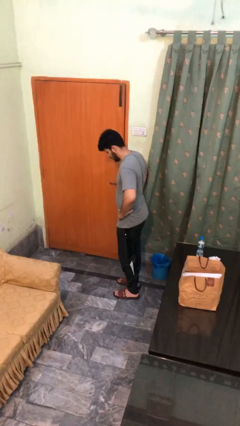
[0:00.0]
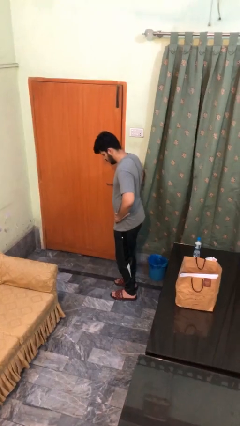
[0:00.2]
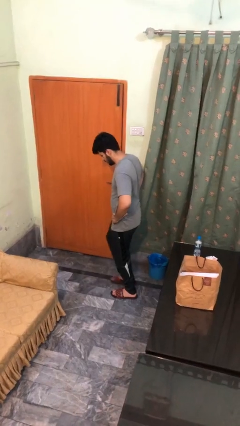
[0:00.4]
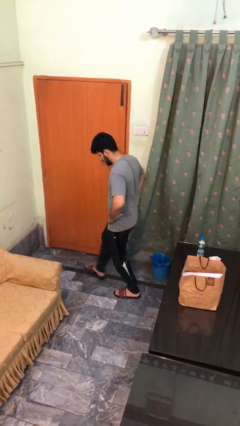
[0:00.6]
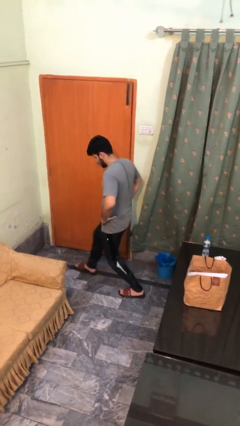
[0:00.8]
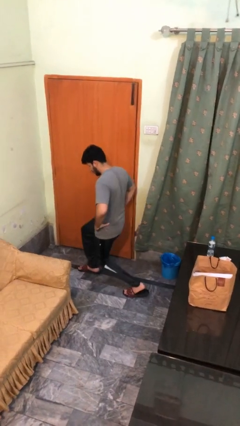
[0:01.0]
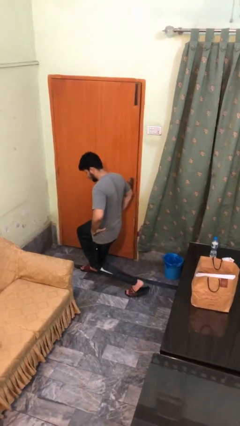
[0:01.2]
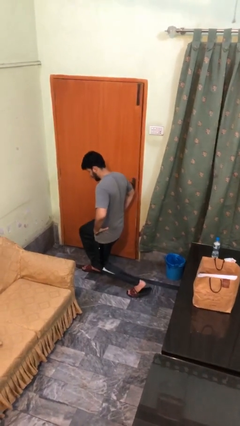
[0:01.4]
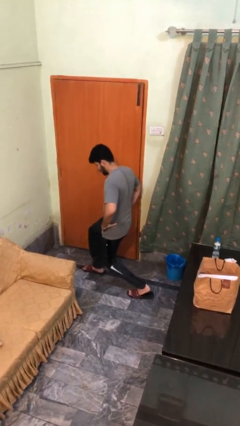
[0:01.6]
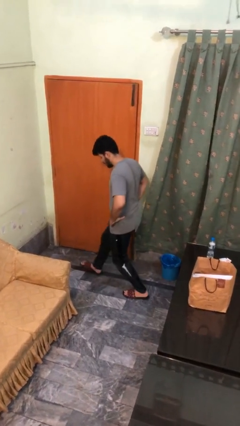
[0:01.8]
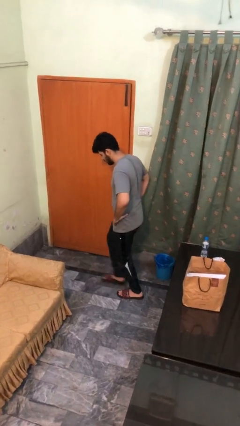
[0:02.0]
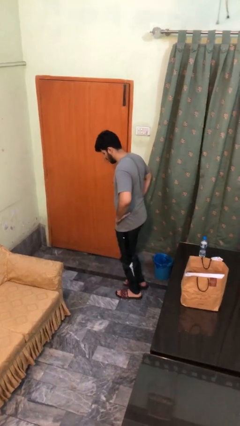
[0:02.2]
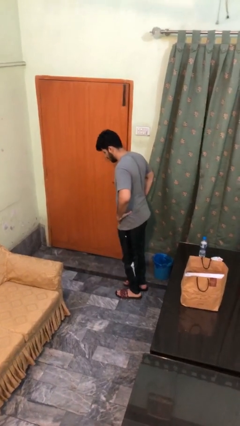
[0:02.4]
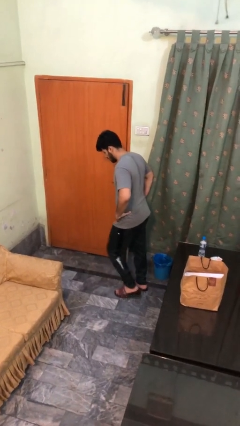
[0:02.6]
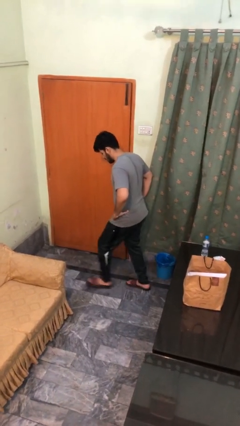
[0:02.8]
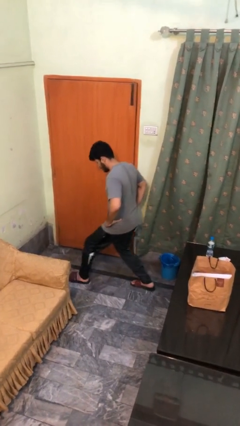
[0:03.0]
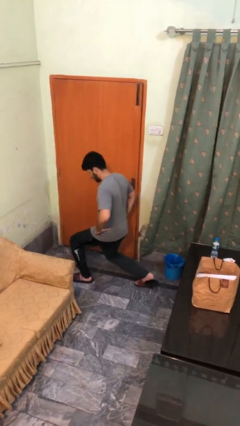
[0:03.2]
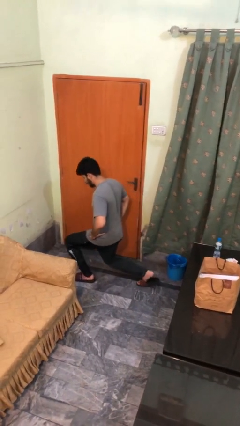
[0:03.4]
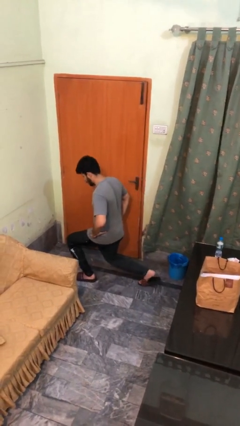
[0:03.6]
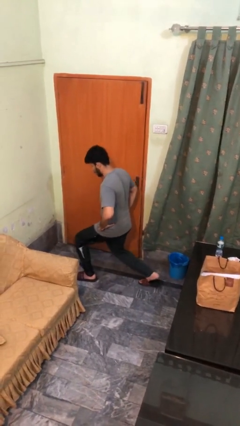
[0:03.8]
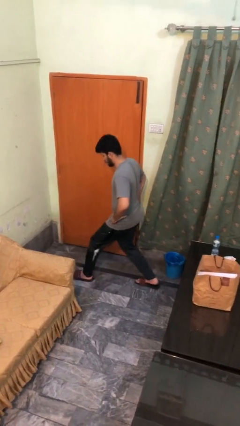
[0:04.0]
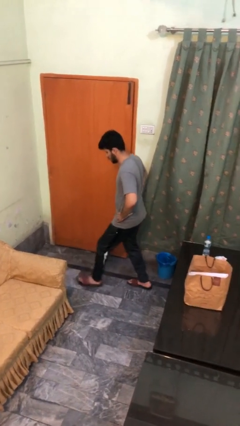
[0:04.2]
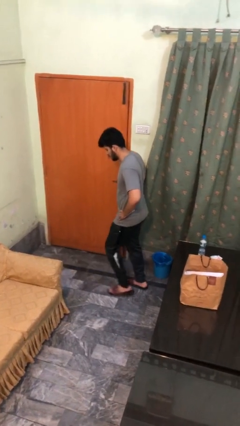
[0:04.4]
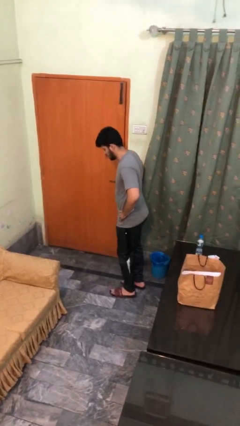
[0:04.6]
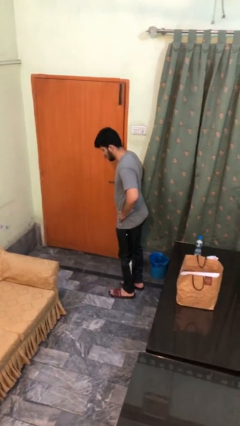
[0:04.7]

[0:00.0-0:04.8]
person exercises with lunges

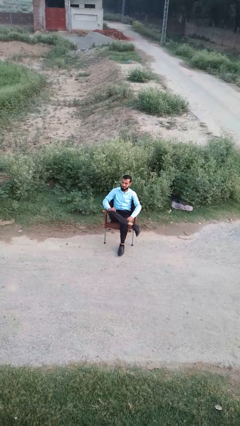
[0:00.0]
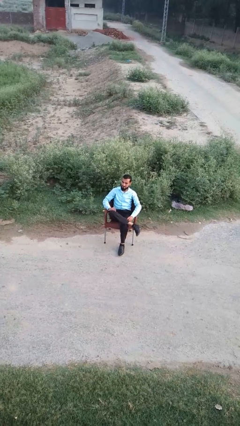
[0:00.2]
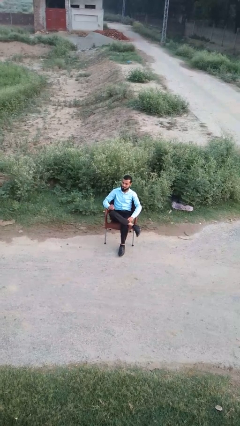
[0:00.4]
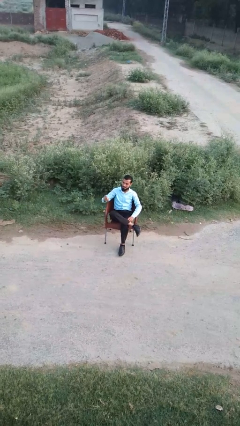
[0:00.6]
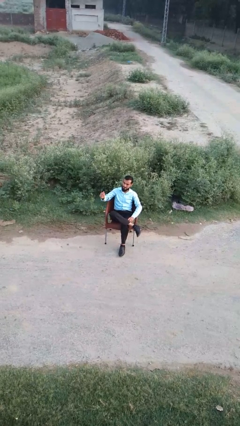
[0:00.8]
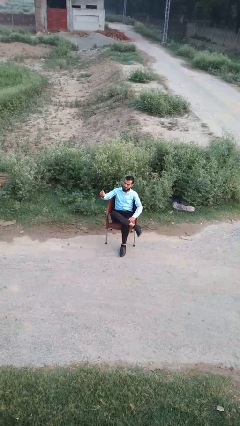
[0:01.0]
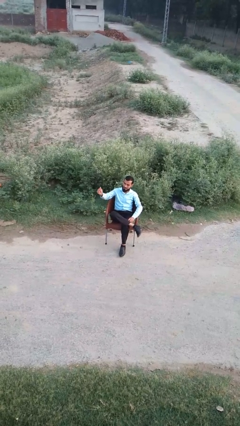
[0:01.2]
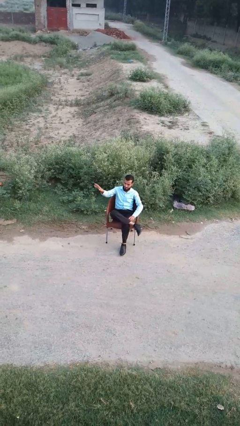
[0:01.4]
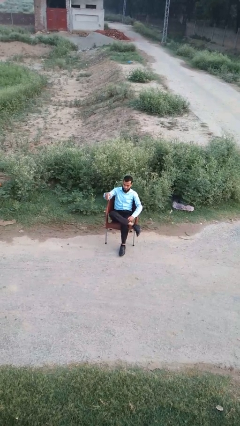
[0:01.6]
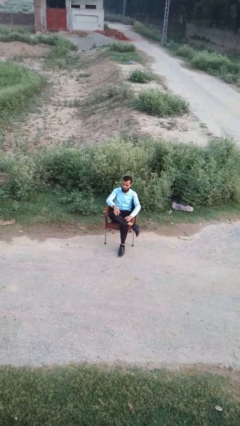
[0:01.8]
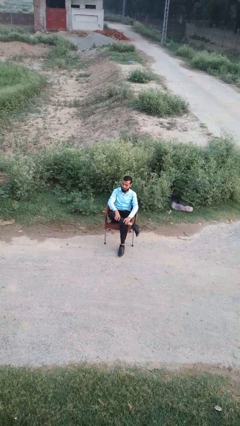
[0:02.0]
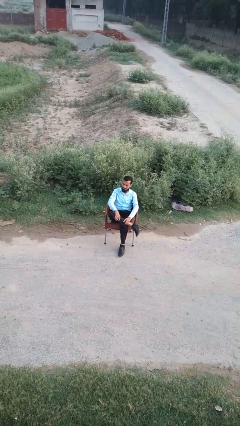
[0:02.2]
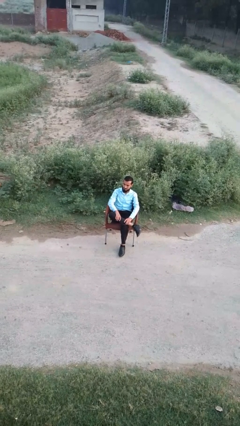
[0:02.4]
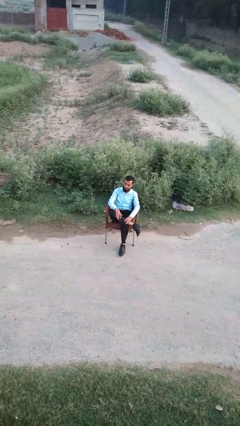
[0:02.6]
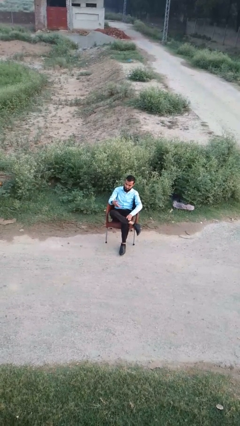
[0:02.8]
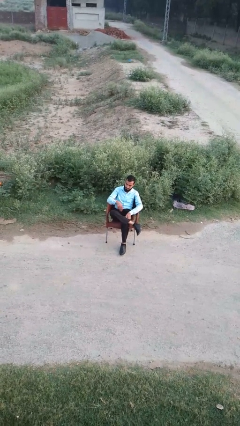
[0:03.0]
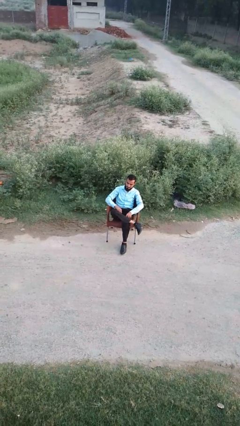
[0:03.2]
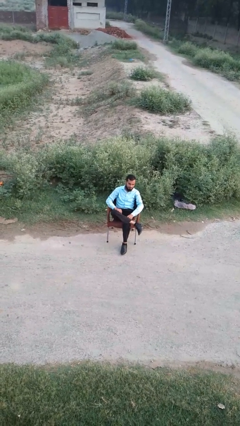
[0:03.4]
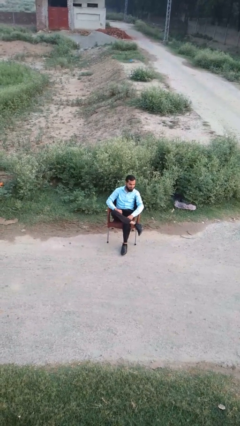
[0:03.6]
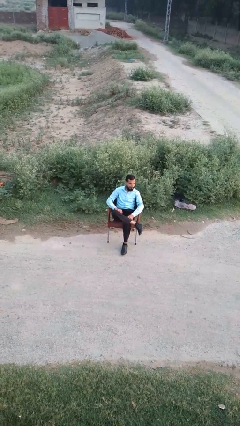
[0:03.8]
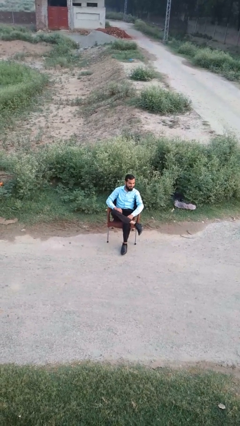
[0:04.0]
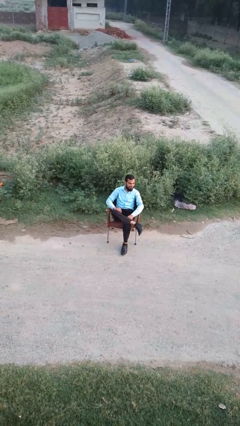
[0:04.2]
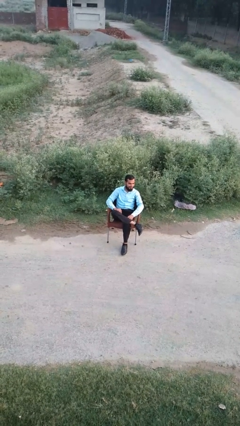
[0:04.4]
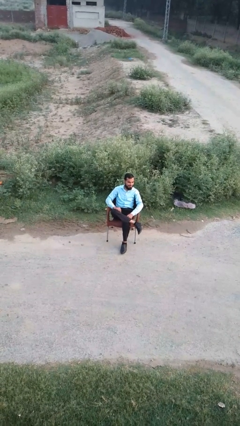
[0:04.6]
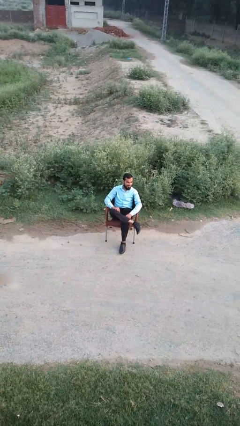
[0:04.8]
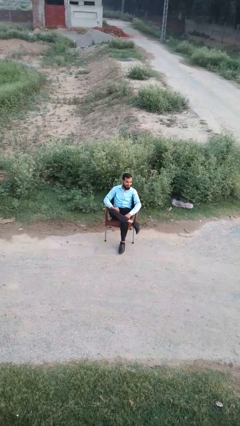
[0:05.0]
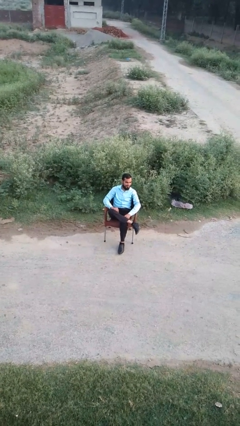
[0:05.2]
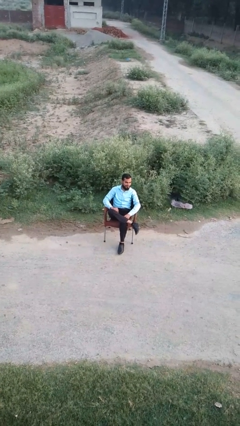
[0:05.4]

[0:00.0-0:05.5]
person gestures come here

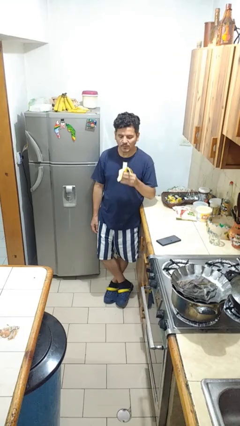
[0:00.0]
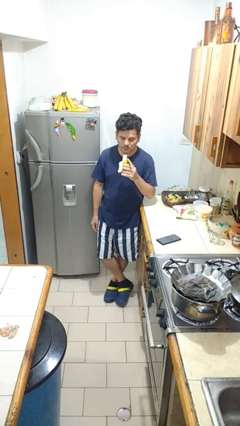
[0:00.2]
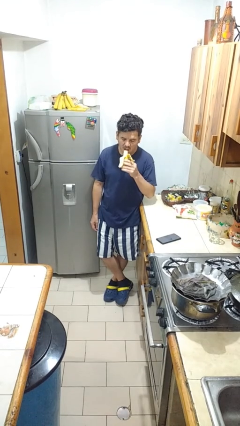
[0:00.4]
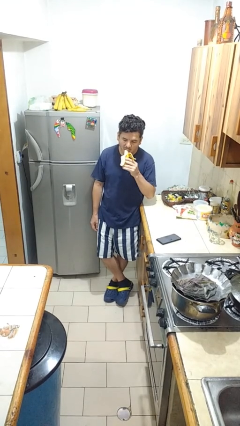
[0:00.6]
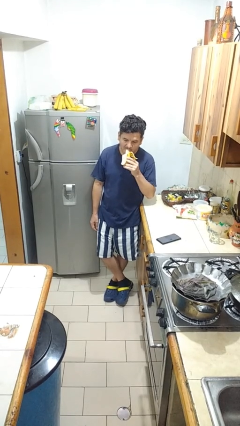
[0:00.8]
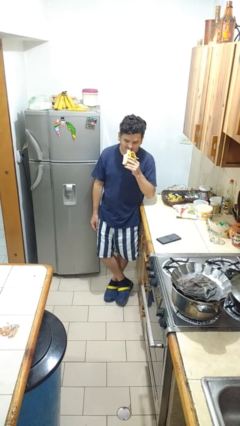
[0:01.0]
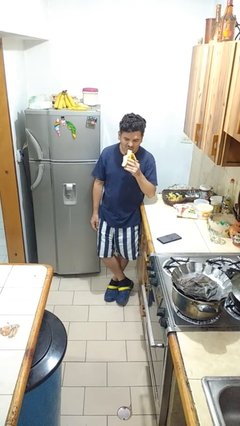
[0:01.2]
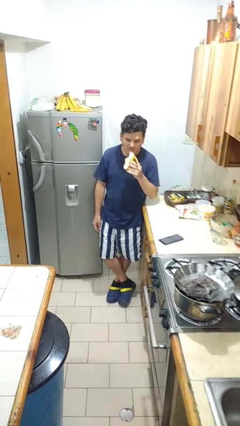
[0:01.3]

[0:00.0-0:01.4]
person eats banana

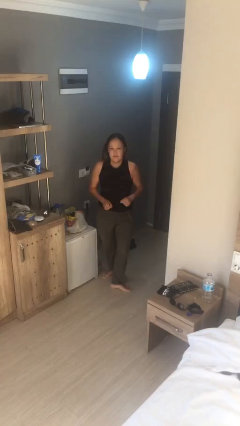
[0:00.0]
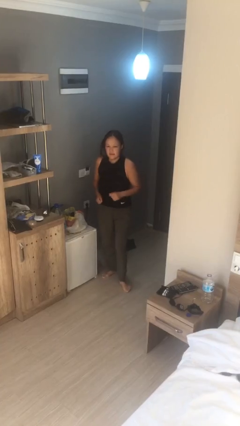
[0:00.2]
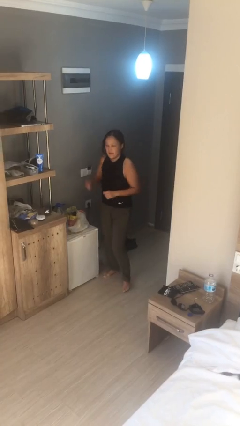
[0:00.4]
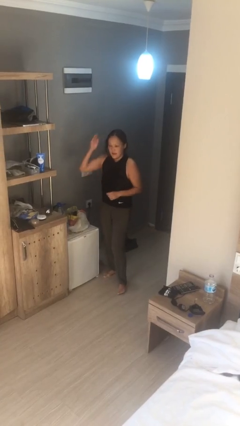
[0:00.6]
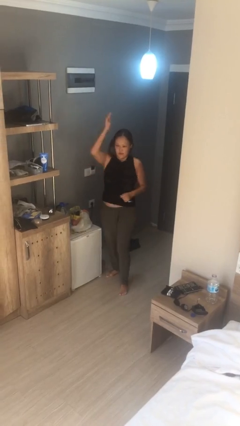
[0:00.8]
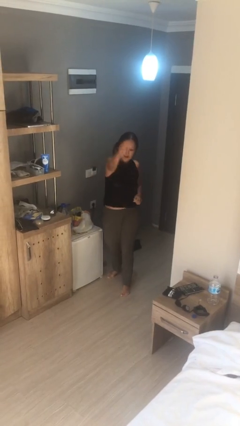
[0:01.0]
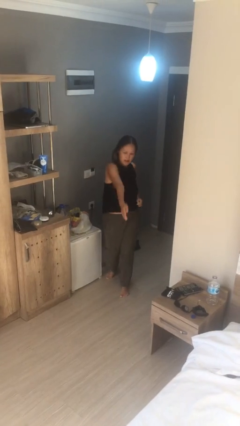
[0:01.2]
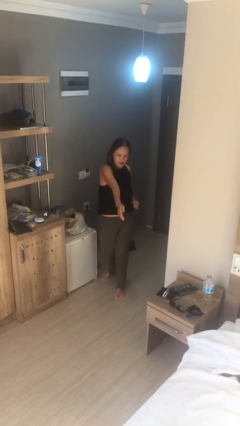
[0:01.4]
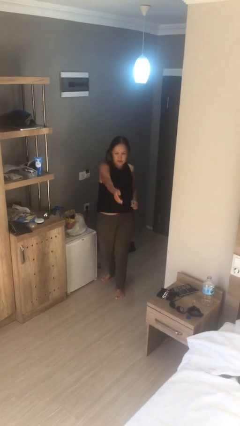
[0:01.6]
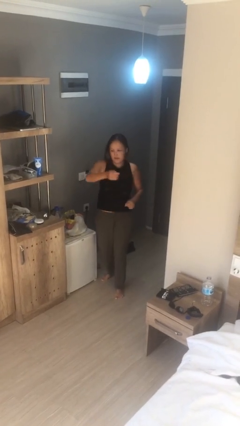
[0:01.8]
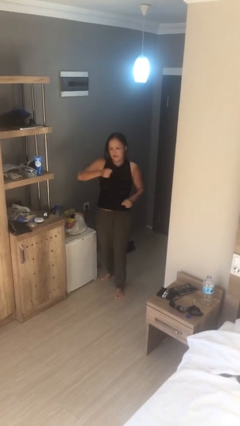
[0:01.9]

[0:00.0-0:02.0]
person karate chop

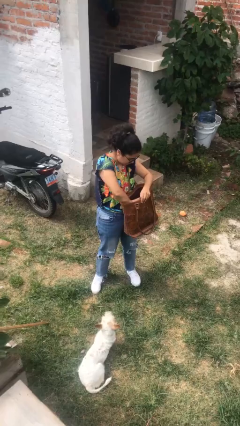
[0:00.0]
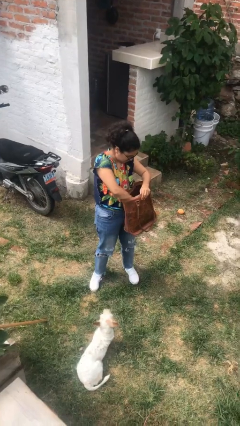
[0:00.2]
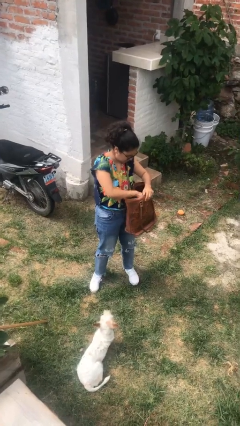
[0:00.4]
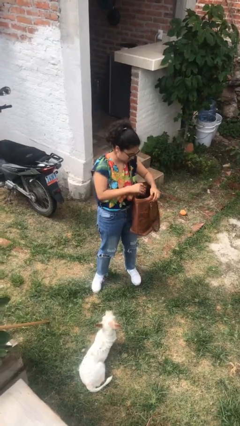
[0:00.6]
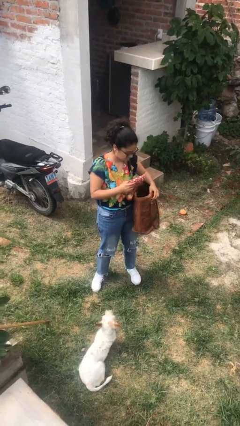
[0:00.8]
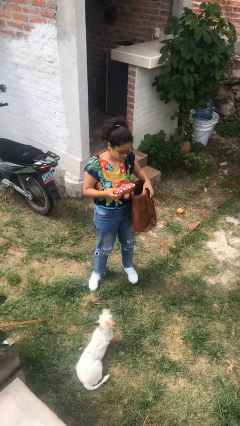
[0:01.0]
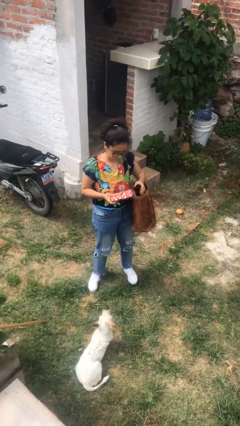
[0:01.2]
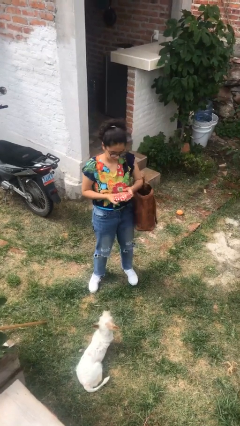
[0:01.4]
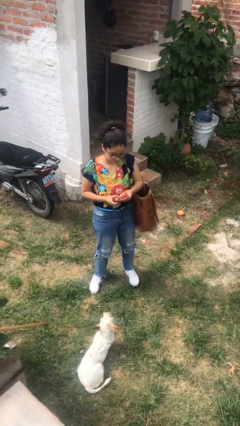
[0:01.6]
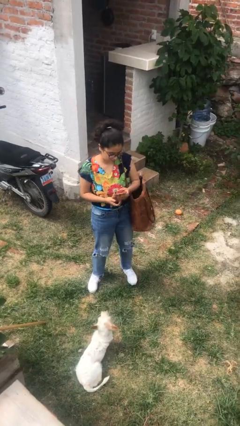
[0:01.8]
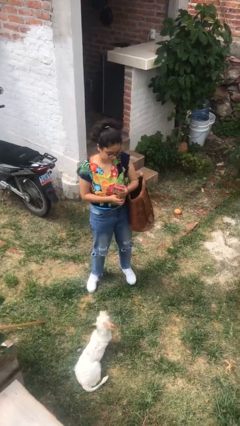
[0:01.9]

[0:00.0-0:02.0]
person takes object from purse

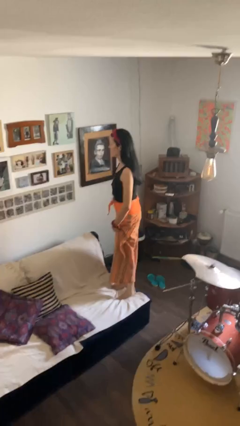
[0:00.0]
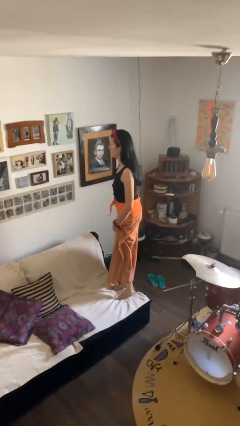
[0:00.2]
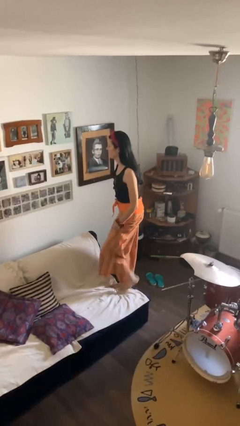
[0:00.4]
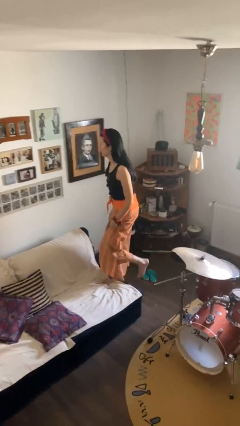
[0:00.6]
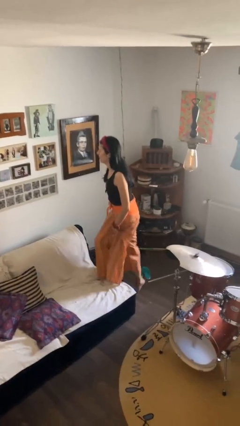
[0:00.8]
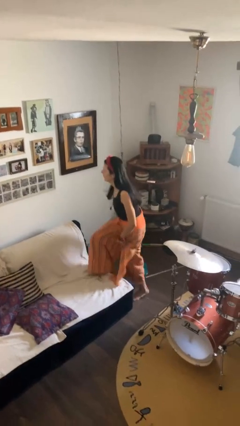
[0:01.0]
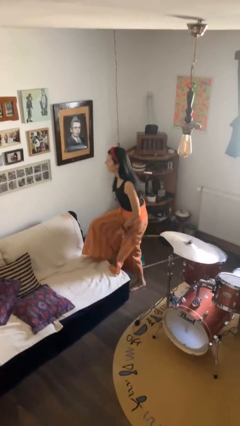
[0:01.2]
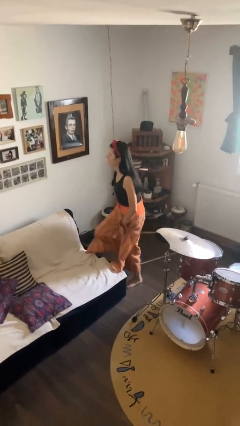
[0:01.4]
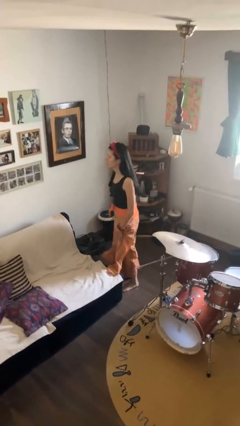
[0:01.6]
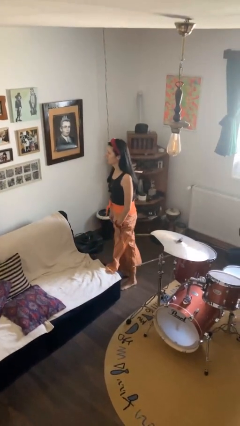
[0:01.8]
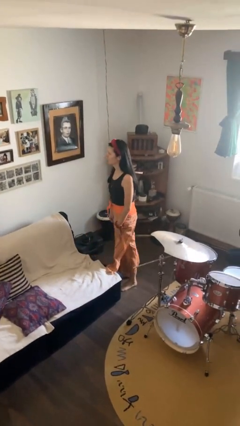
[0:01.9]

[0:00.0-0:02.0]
person climbs off couch

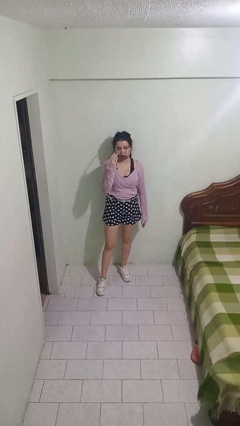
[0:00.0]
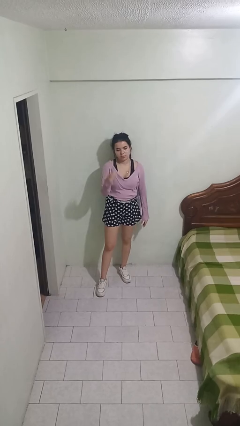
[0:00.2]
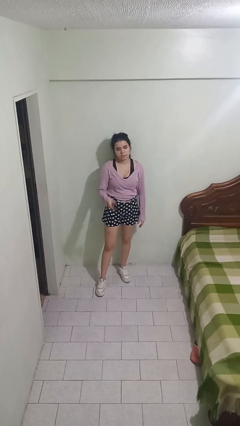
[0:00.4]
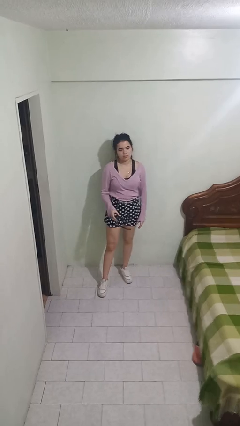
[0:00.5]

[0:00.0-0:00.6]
person takes off sunglasses
